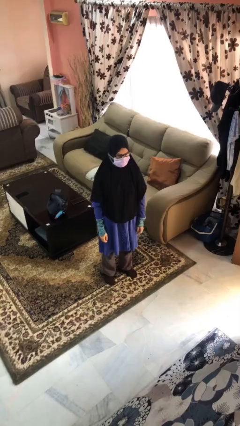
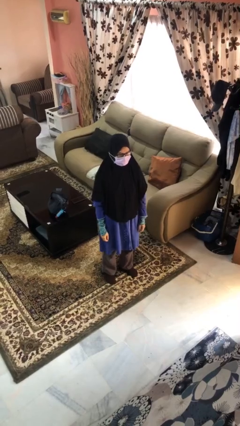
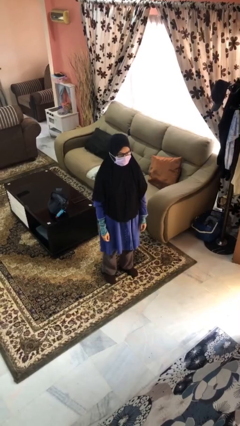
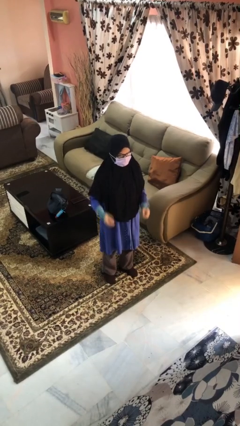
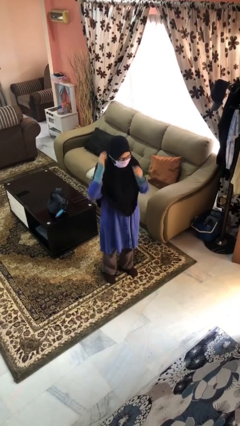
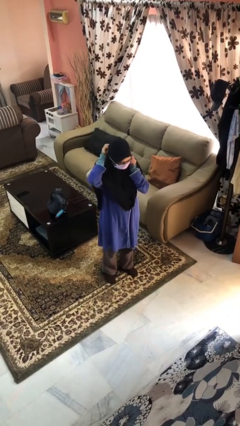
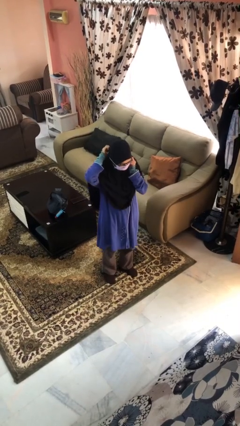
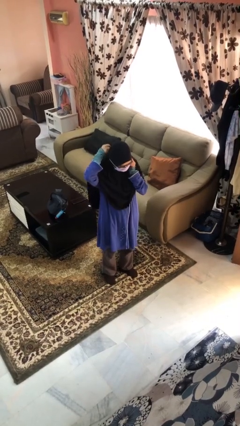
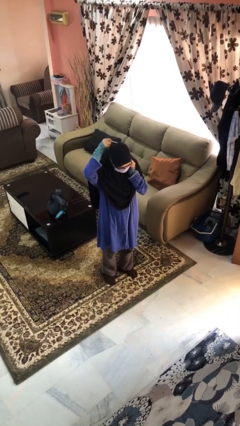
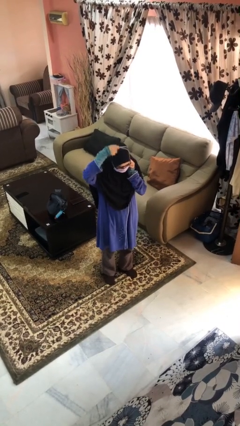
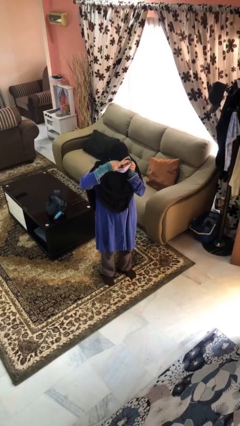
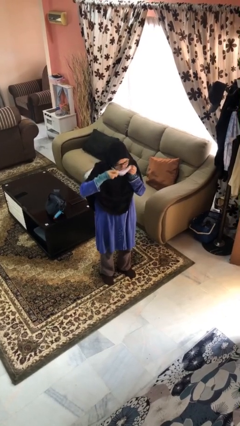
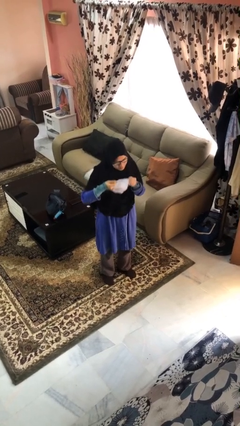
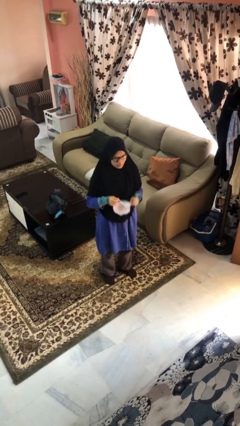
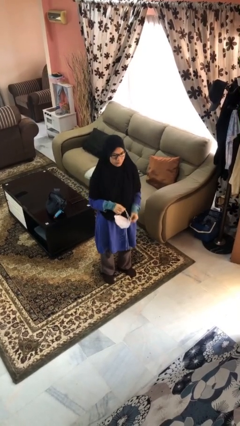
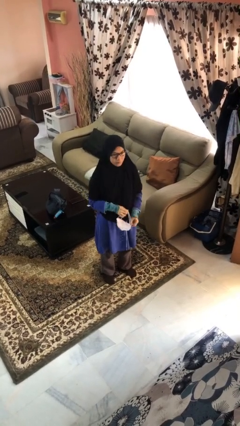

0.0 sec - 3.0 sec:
person takes off facemask

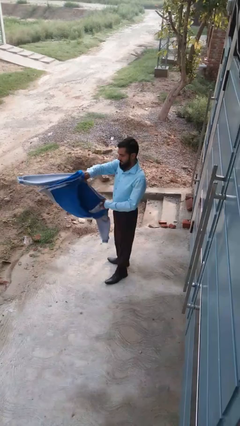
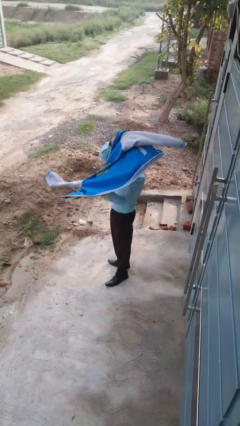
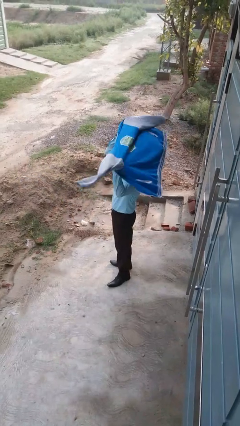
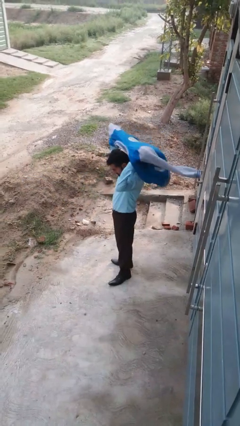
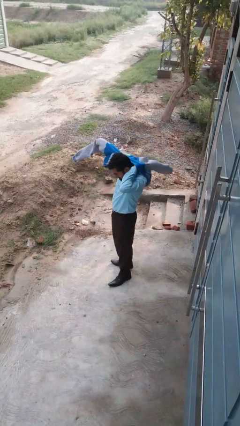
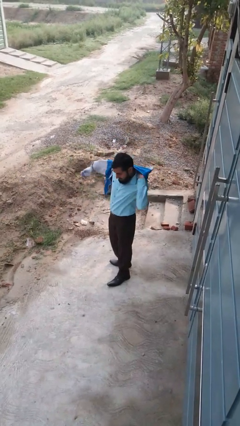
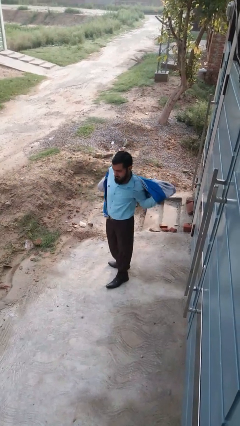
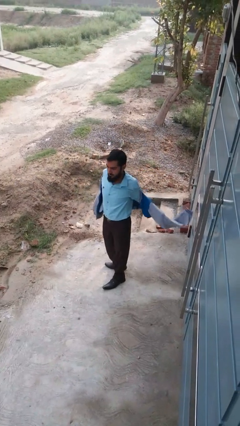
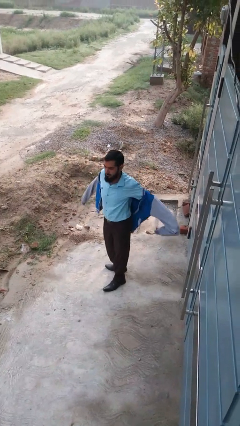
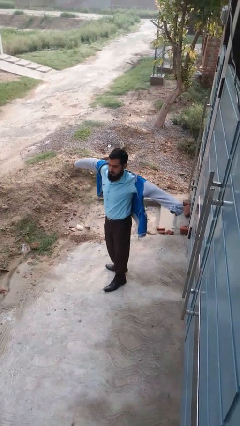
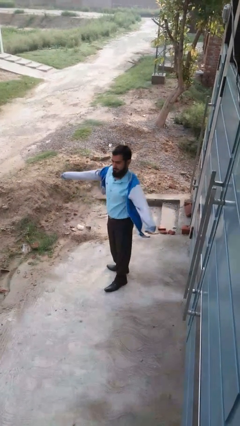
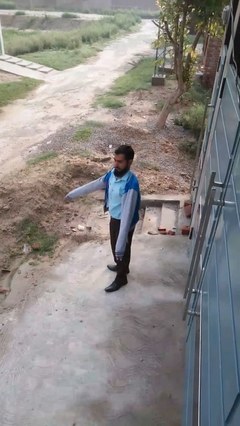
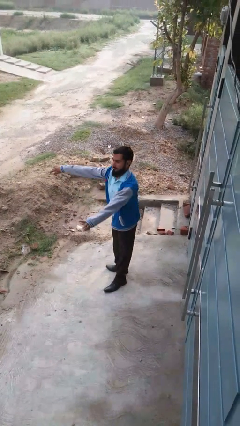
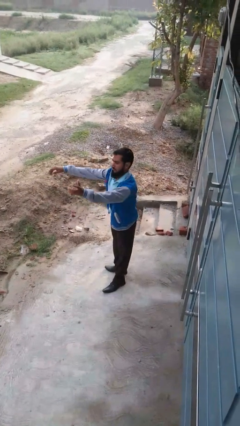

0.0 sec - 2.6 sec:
person puts on jacket

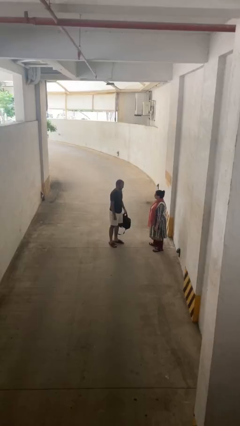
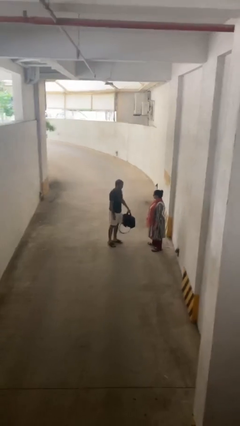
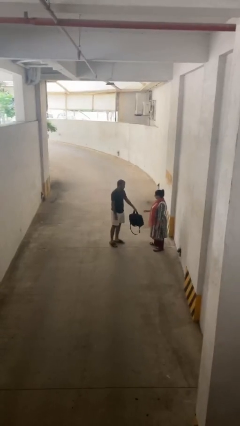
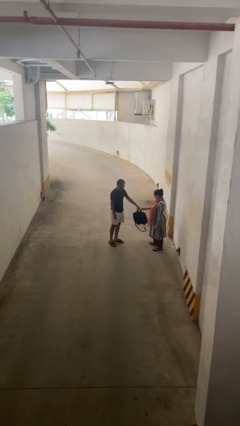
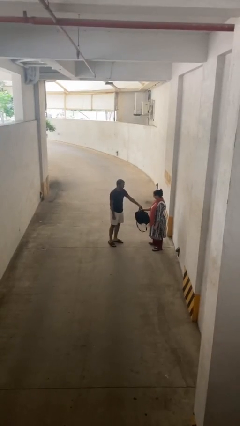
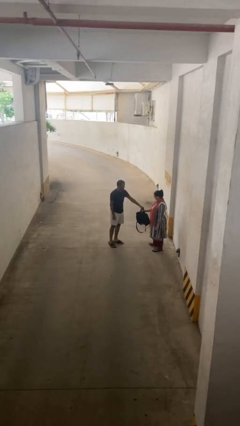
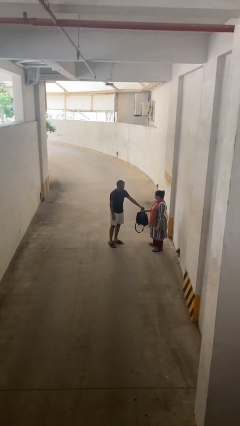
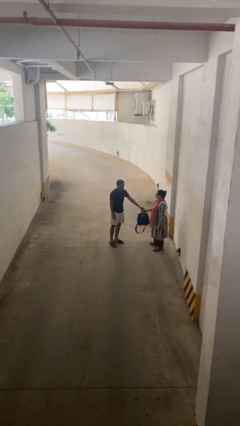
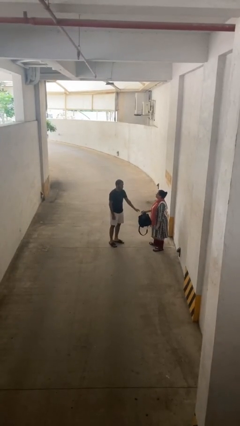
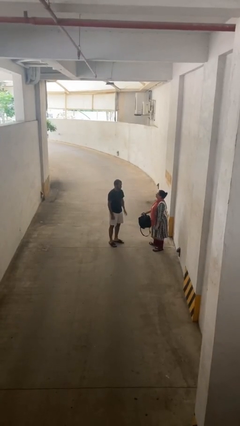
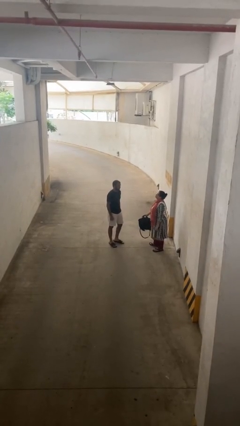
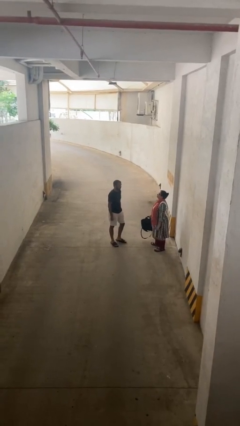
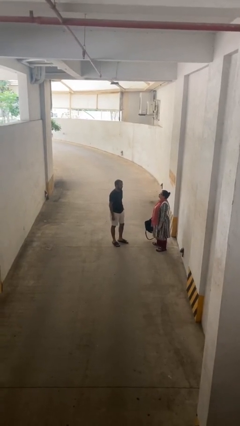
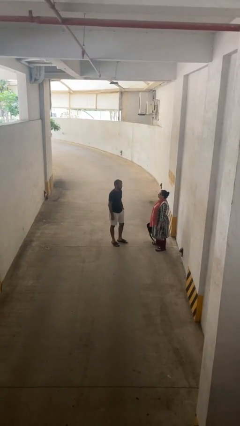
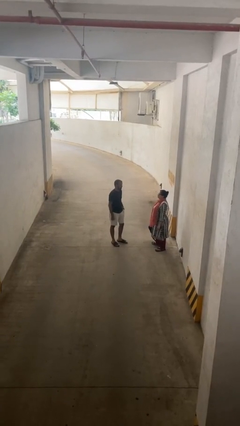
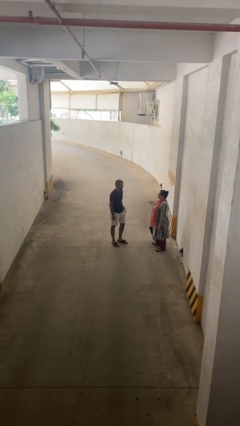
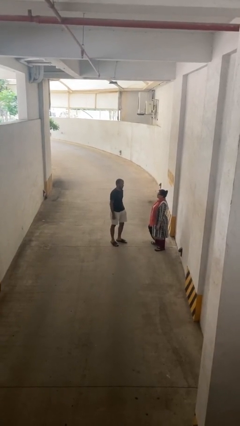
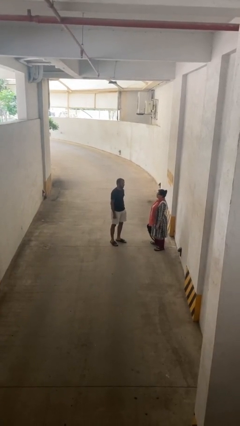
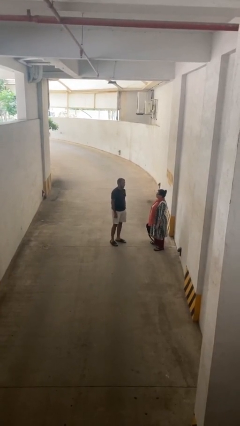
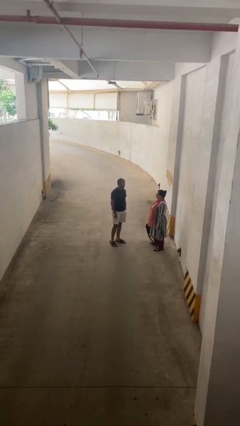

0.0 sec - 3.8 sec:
person transfers object to person

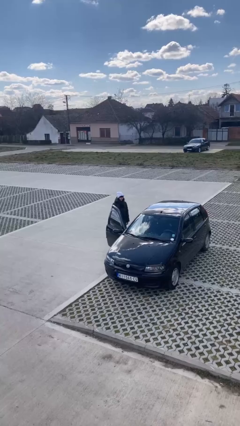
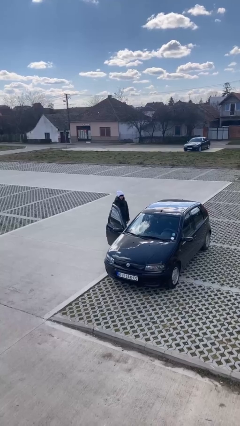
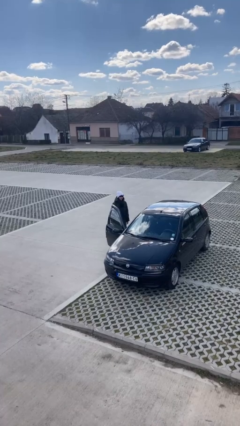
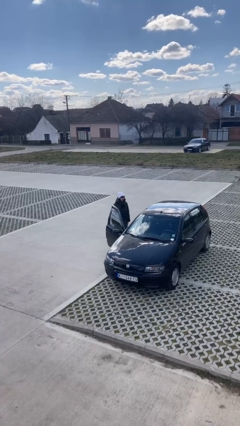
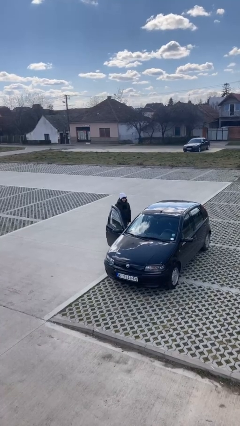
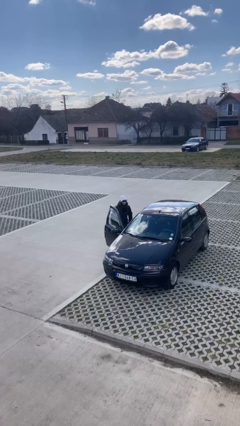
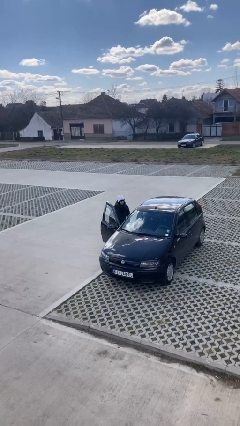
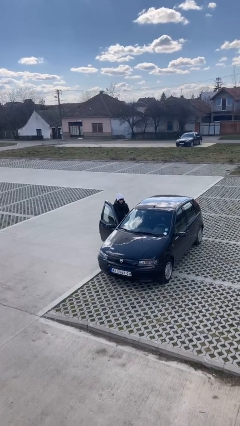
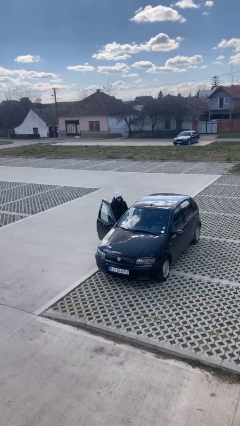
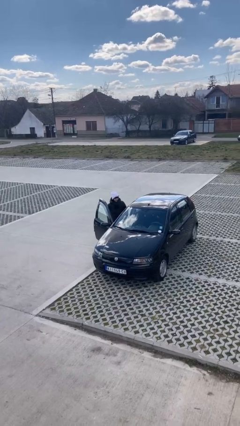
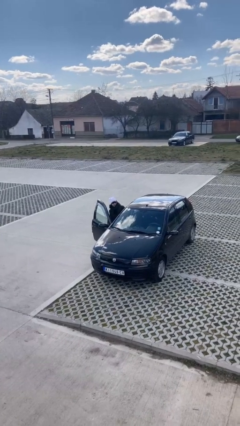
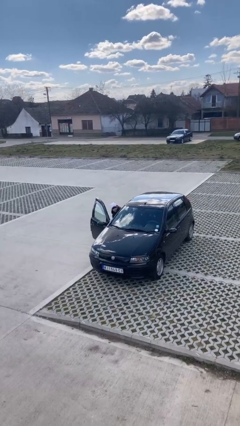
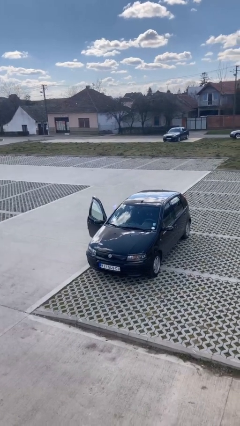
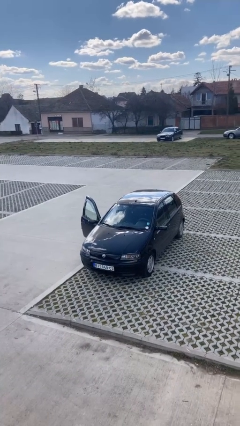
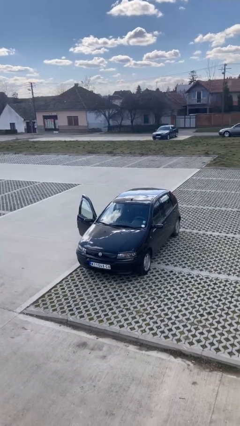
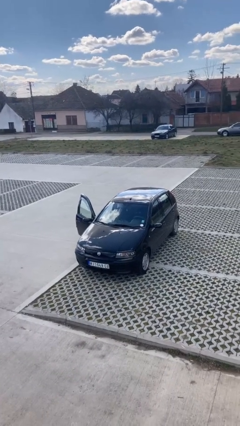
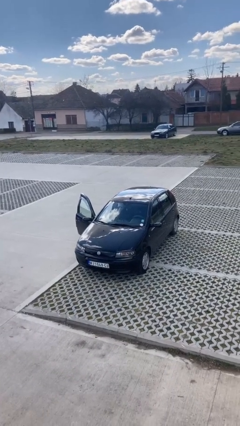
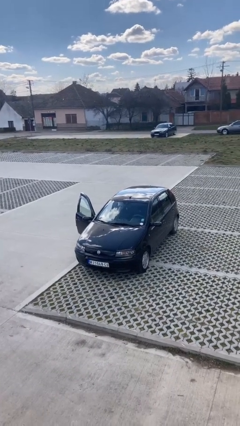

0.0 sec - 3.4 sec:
person enters car

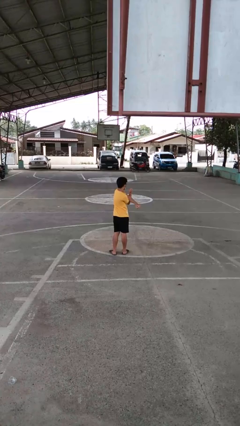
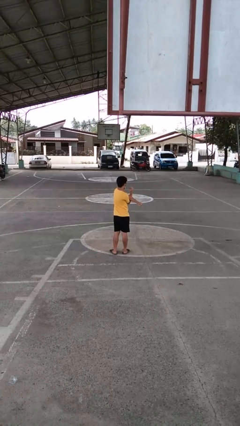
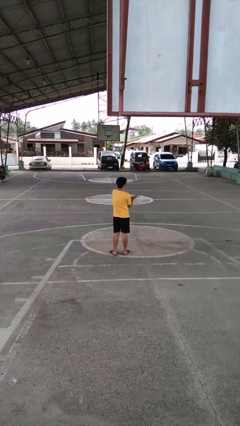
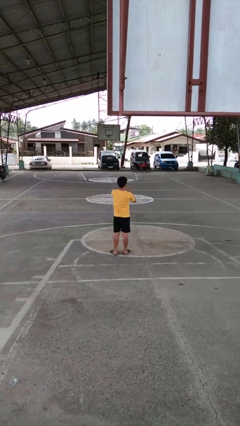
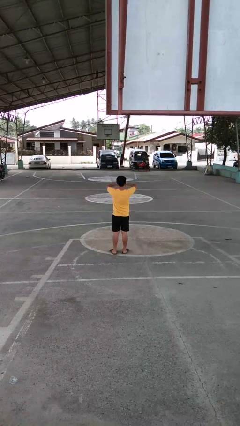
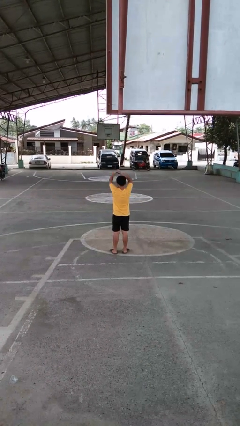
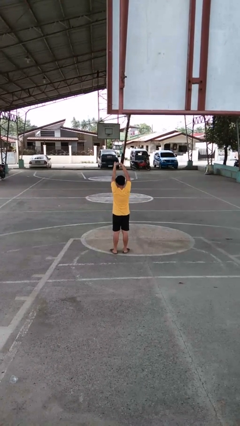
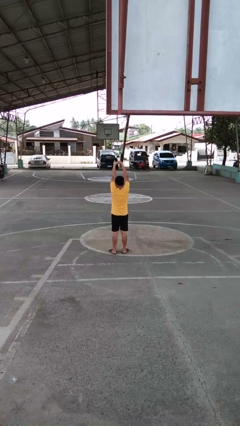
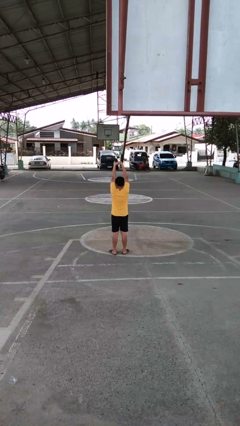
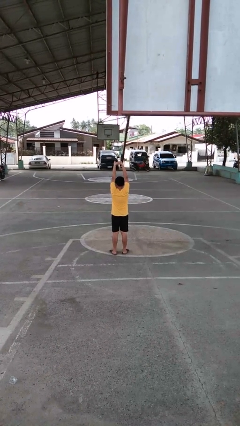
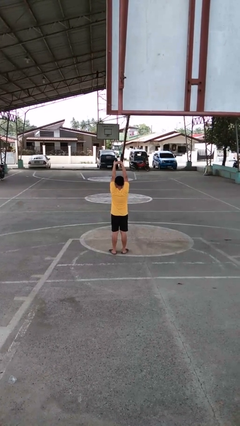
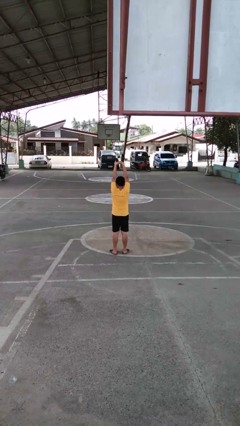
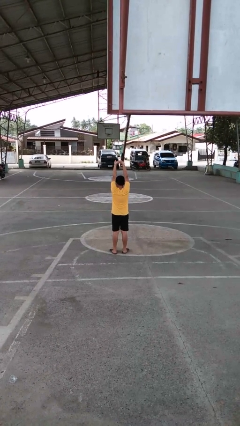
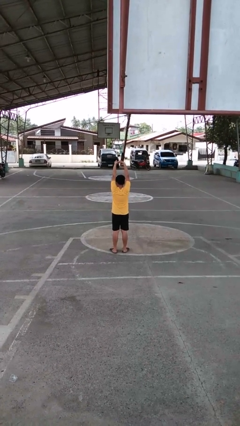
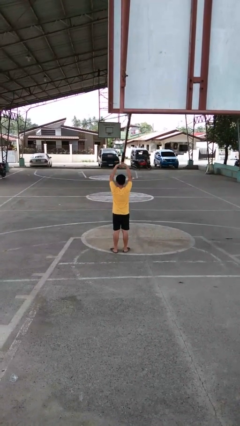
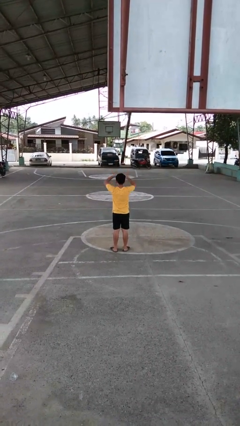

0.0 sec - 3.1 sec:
person stretches arms over head

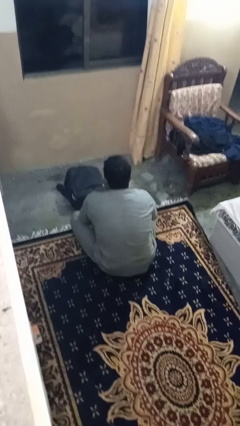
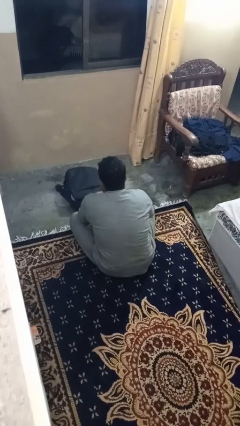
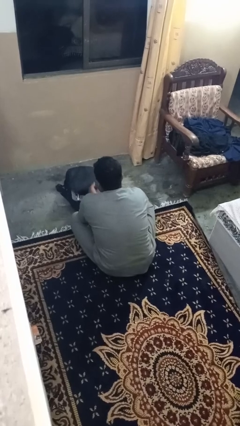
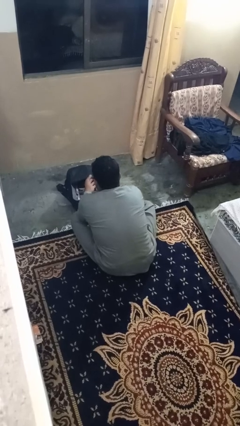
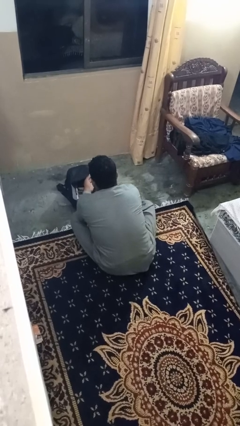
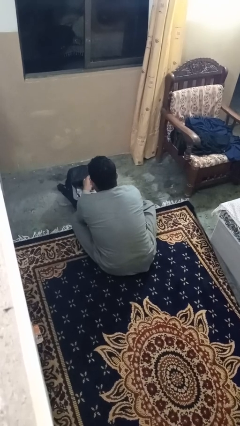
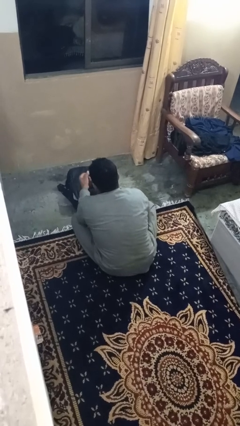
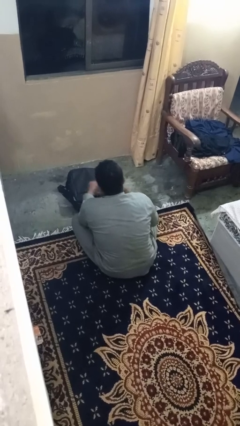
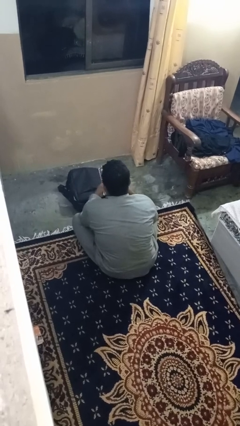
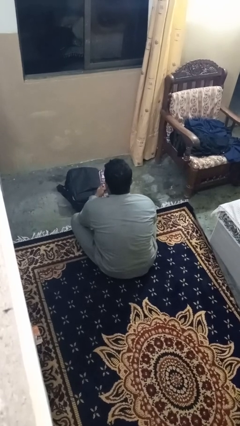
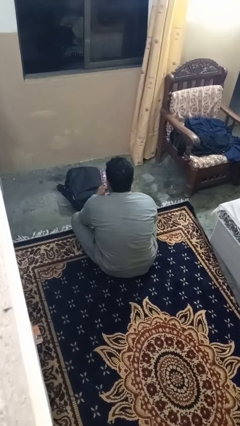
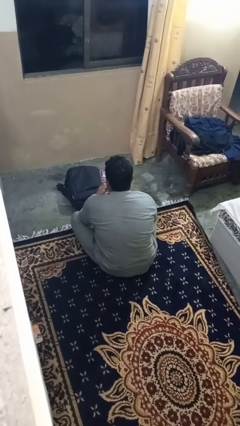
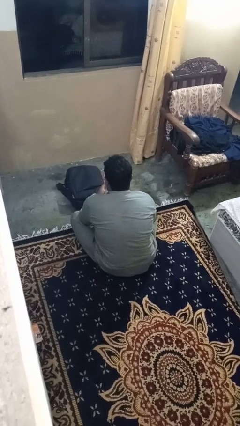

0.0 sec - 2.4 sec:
person takes object from bag
